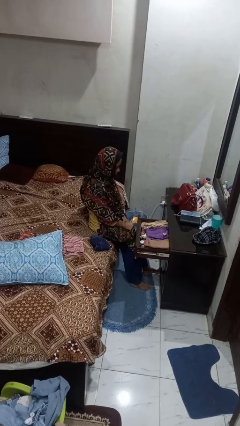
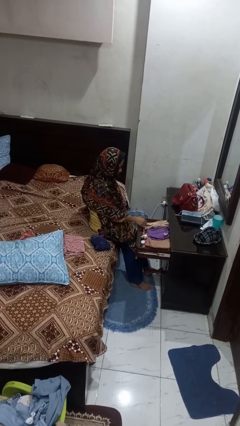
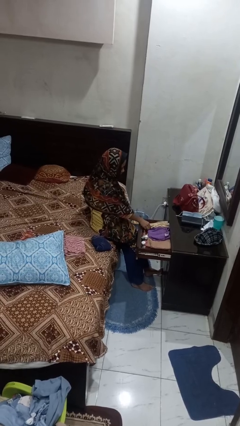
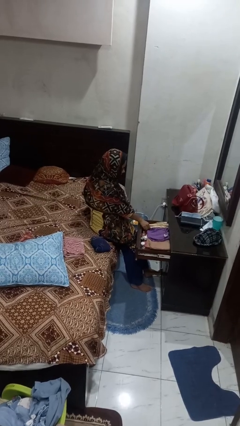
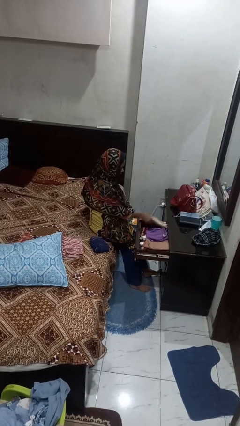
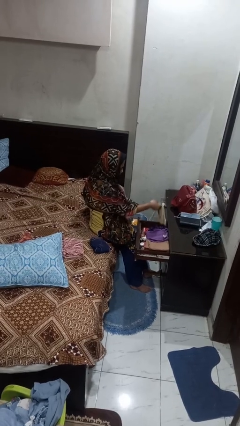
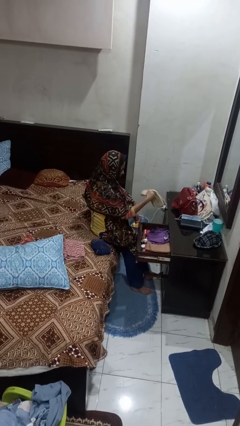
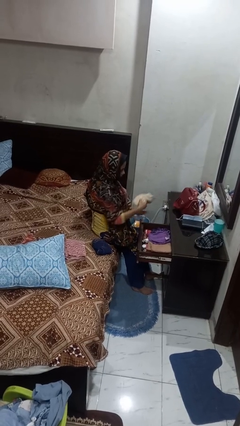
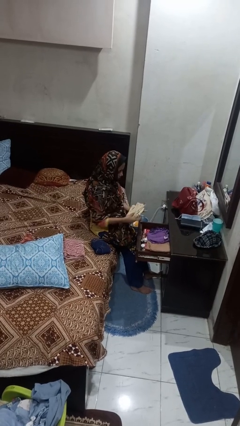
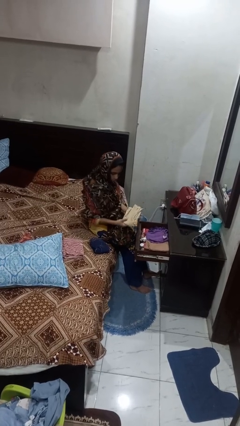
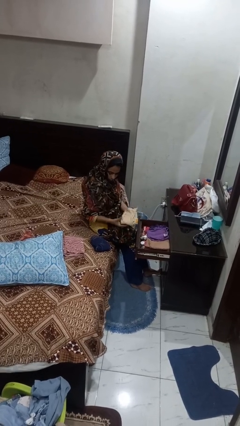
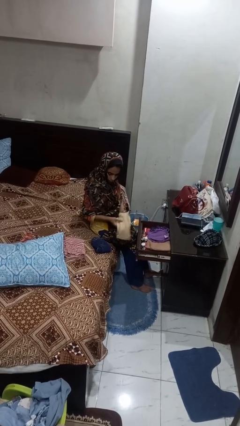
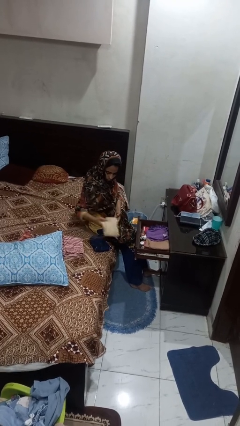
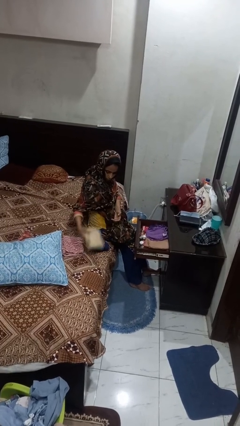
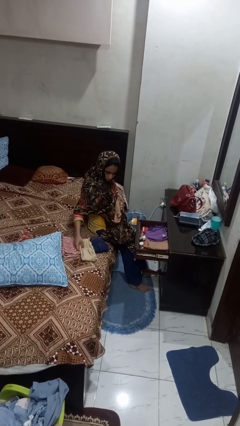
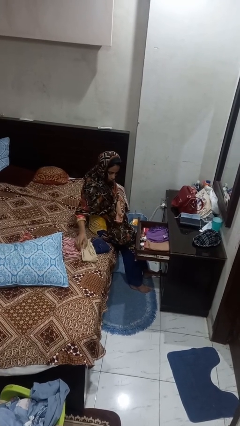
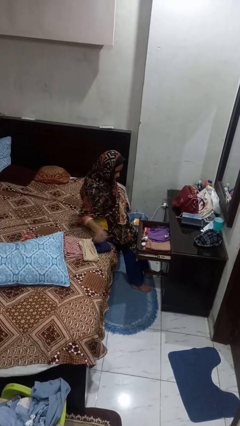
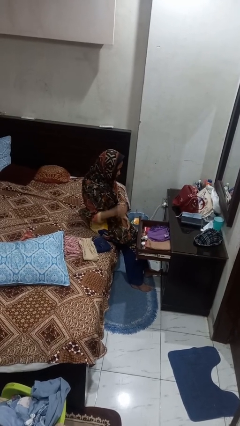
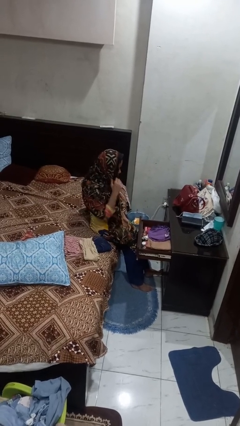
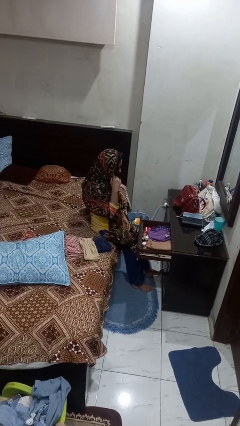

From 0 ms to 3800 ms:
person takes clothes from dresser

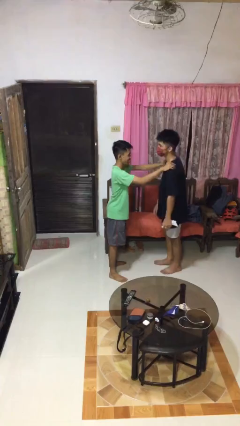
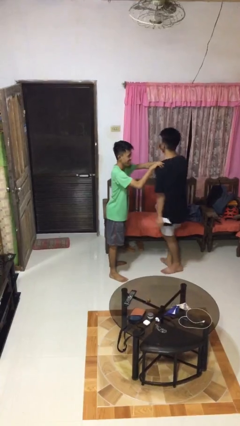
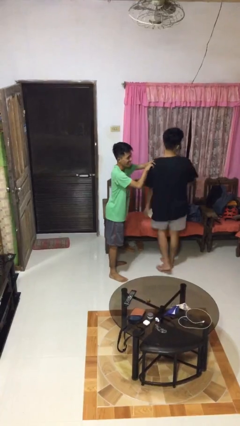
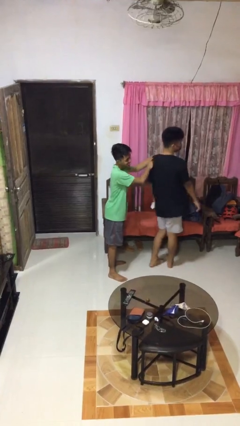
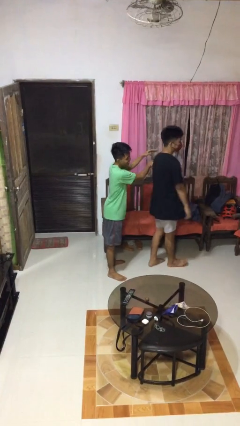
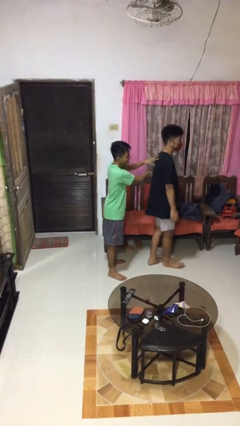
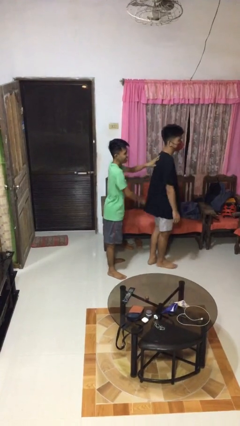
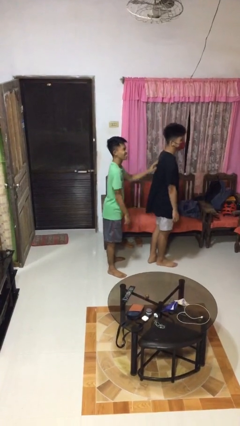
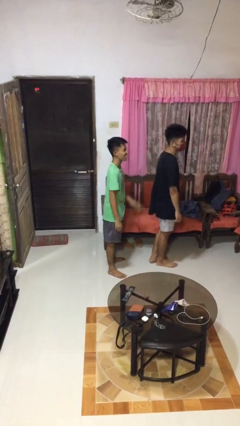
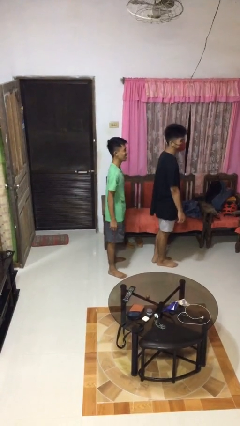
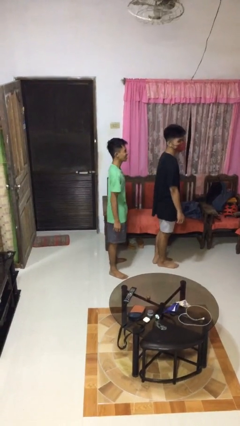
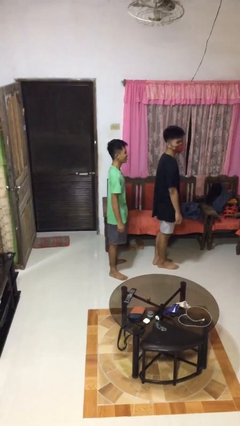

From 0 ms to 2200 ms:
person spins person around

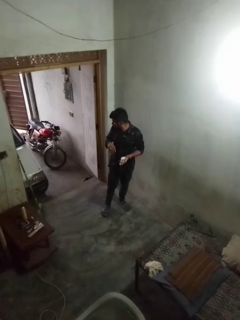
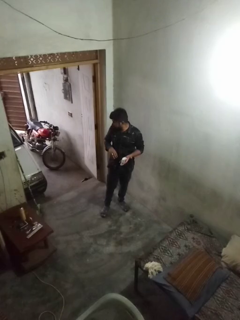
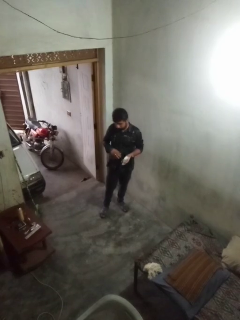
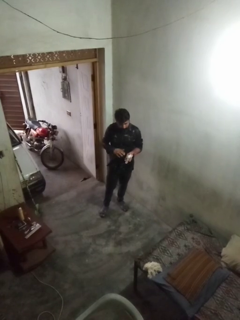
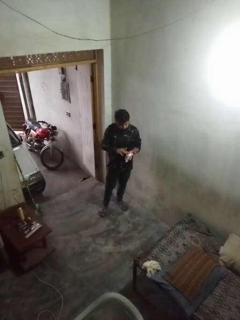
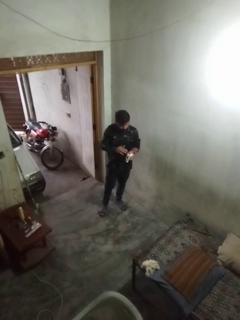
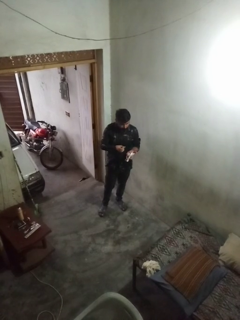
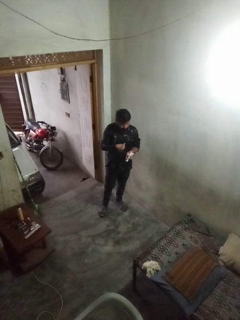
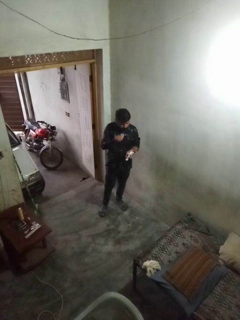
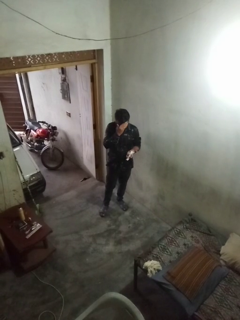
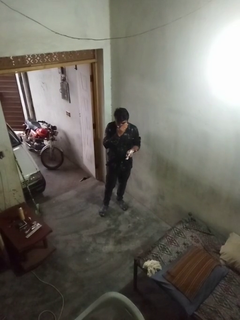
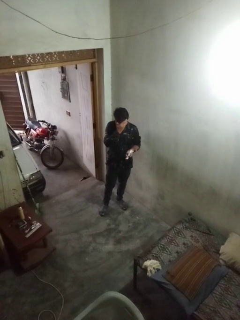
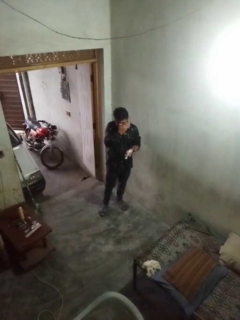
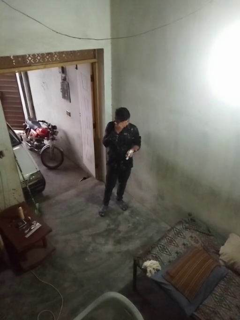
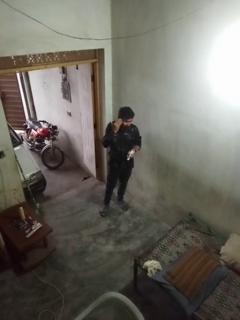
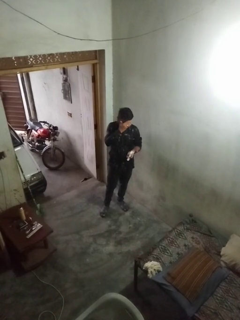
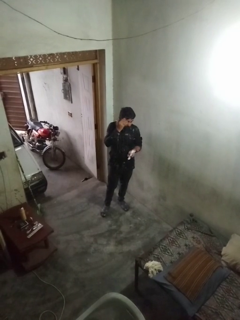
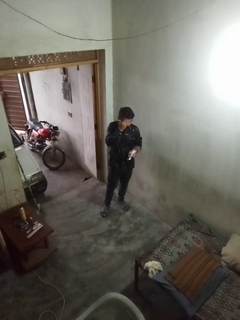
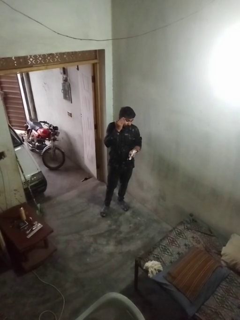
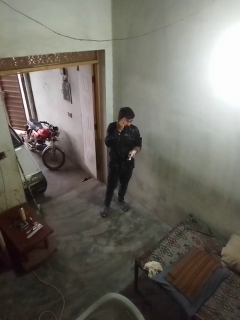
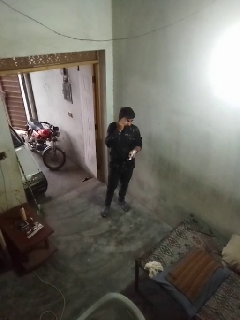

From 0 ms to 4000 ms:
person applies sunscreen

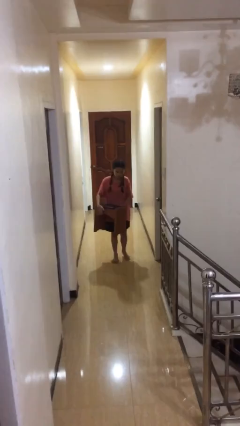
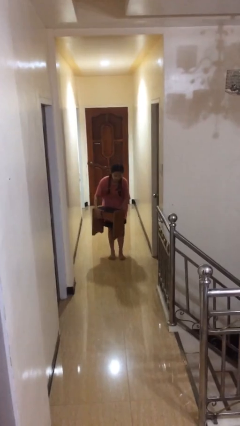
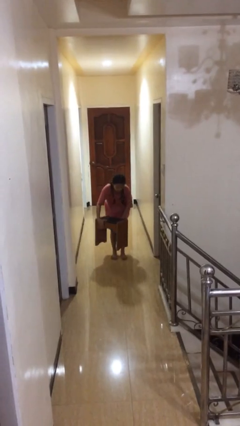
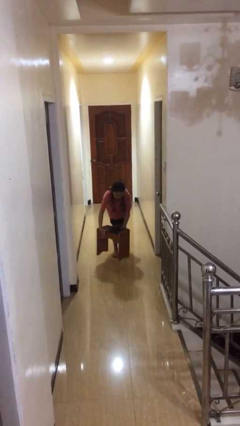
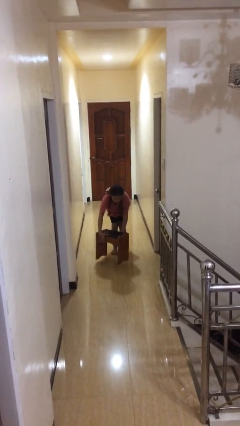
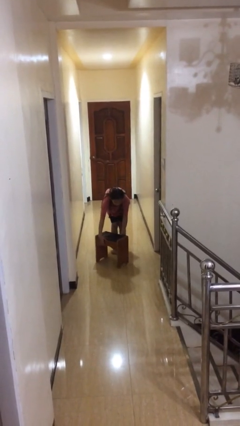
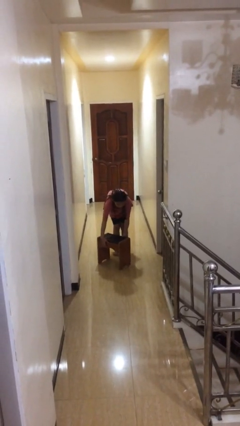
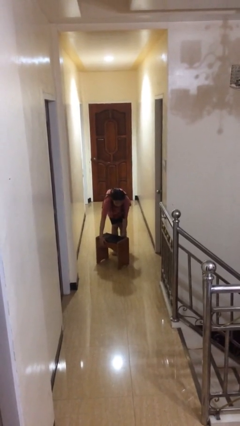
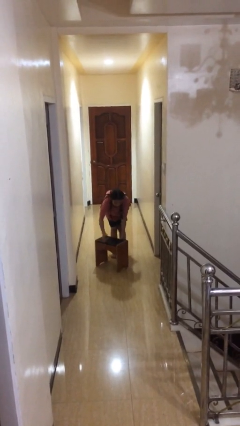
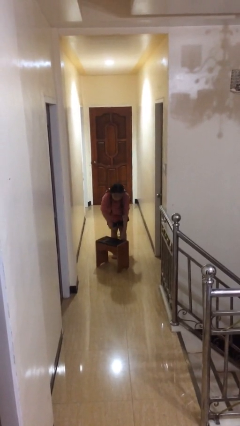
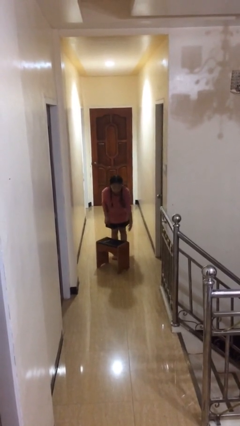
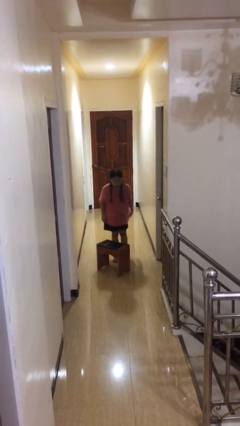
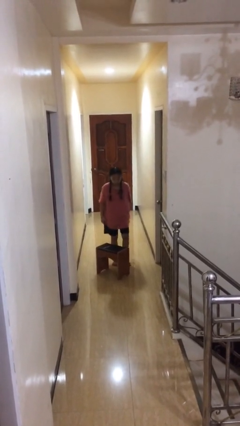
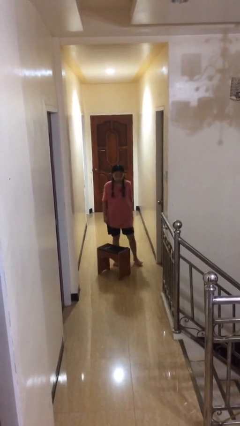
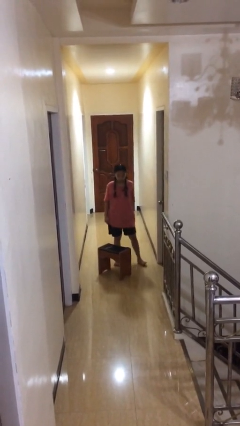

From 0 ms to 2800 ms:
person puts down object on floor

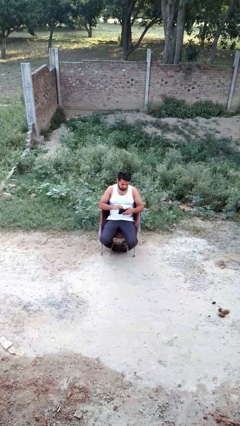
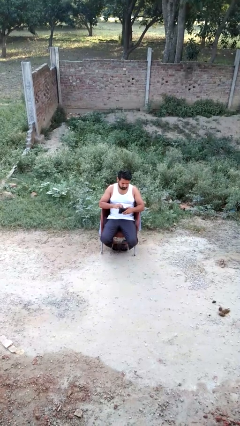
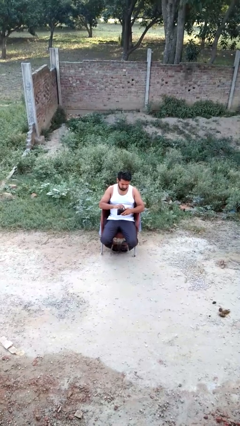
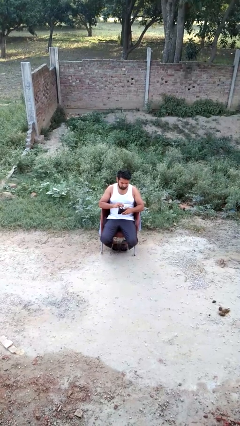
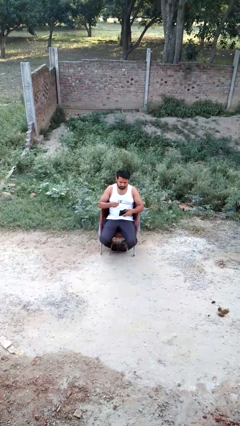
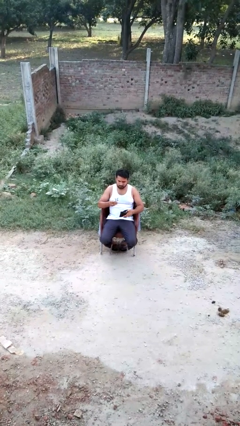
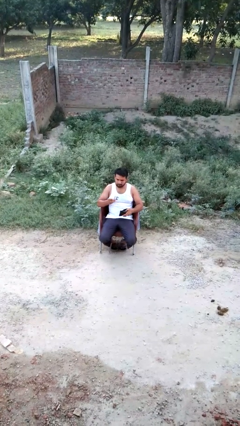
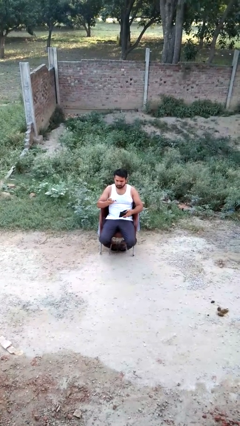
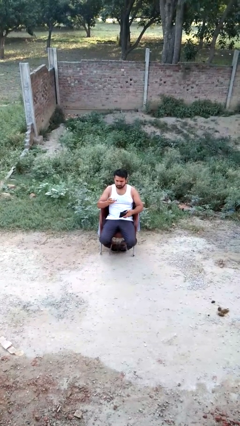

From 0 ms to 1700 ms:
person takes object from purse

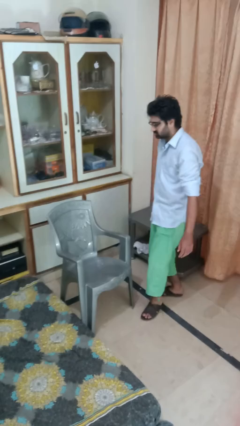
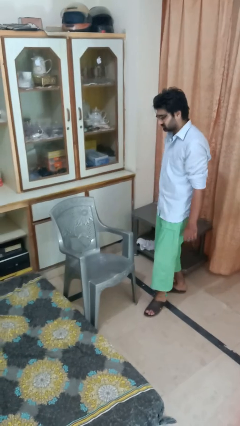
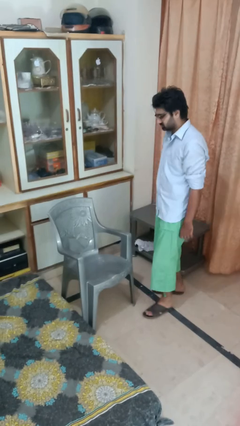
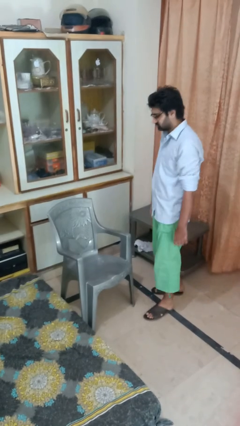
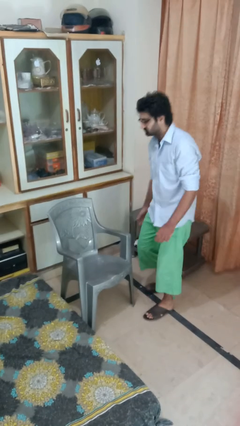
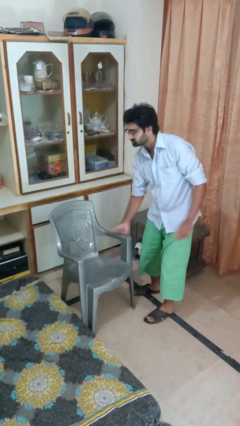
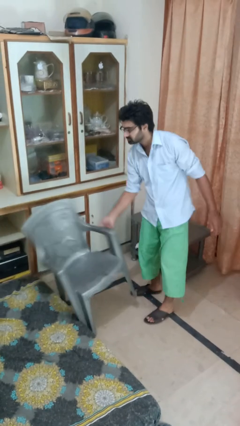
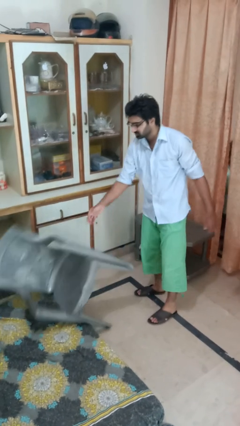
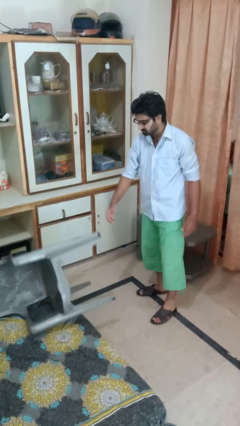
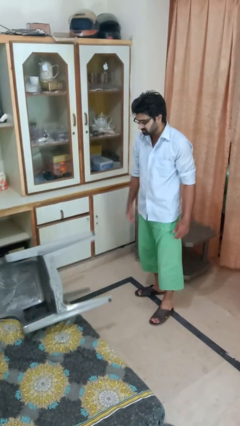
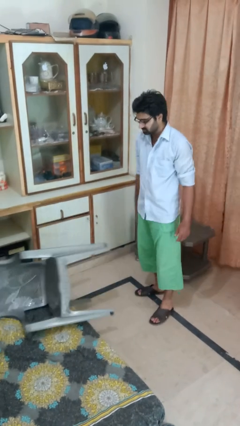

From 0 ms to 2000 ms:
person knocks over furniture

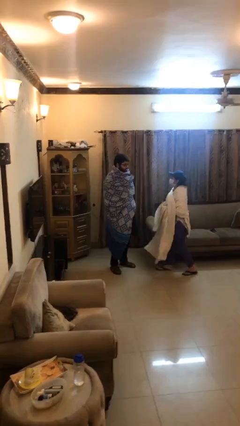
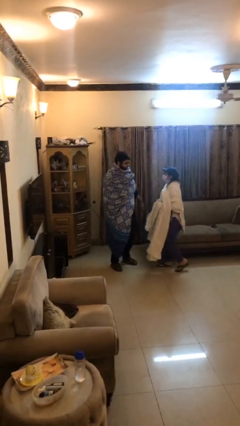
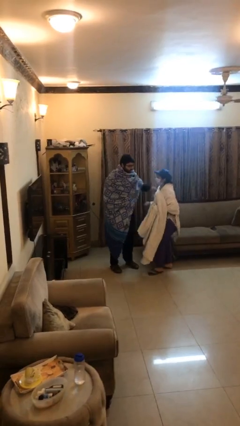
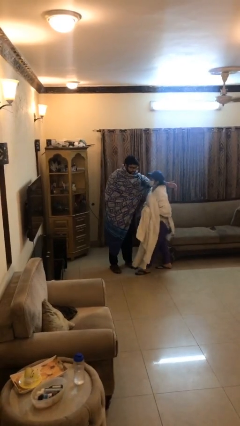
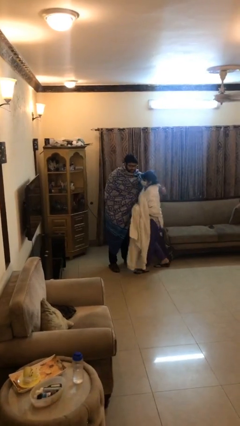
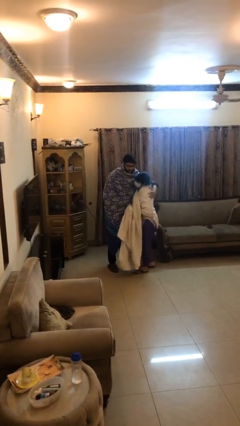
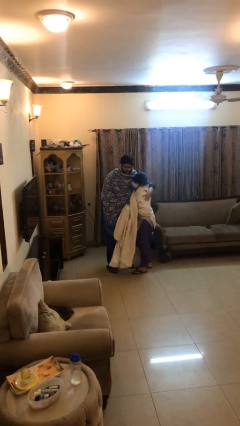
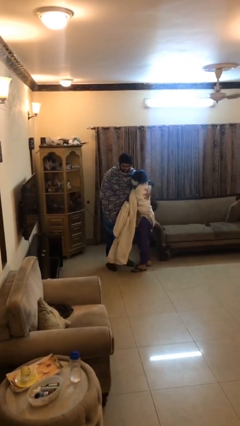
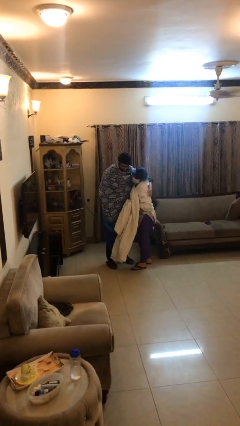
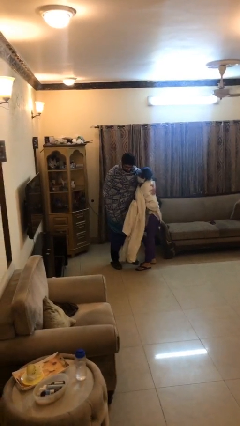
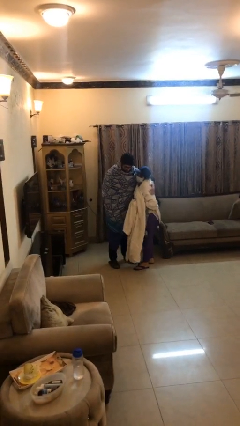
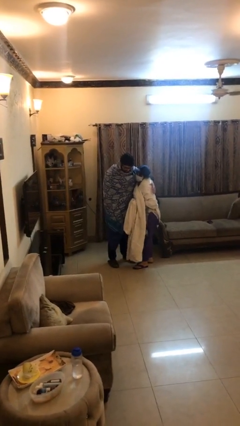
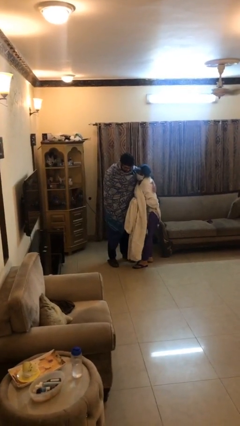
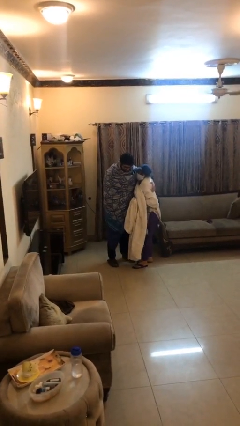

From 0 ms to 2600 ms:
person embraces person
